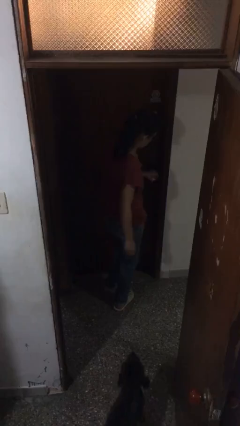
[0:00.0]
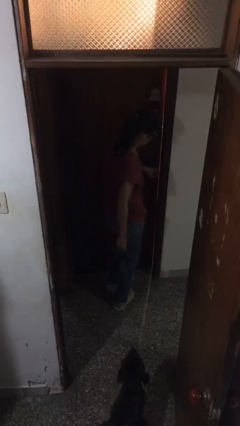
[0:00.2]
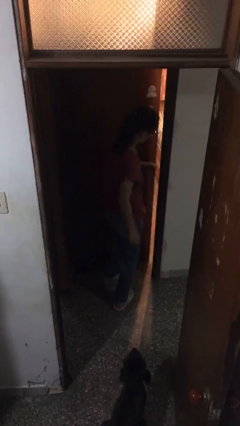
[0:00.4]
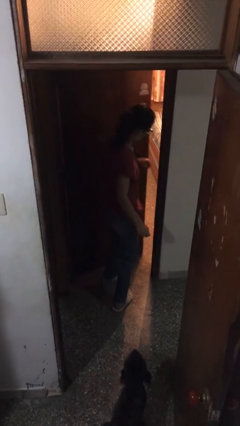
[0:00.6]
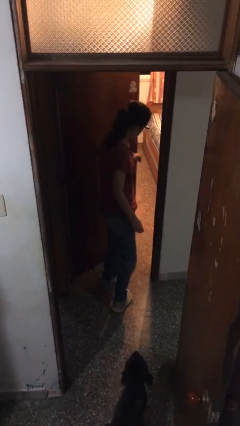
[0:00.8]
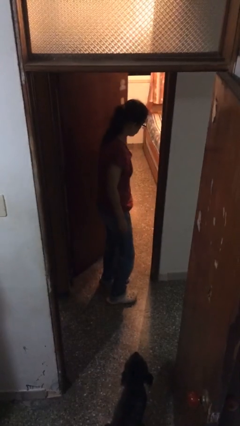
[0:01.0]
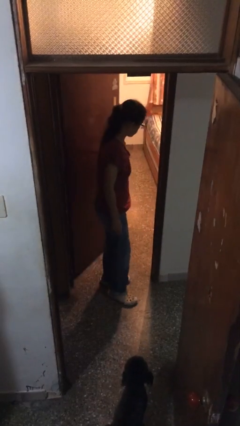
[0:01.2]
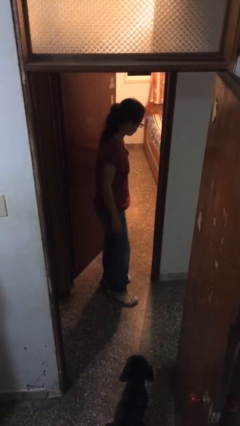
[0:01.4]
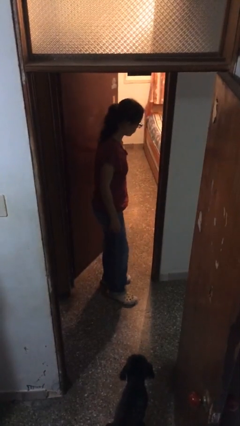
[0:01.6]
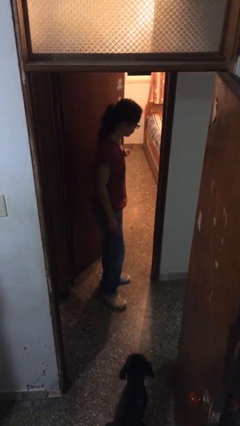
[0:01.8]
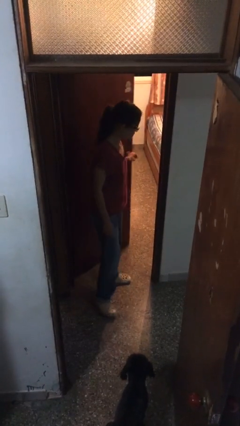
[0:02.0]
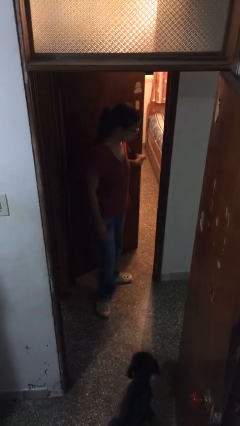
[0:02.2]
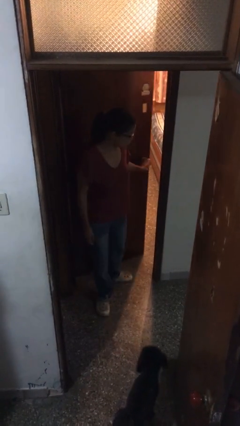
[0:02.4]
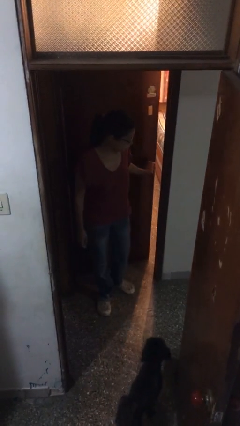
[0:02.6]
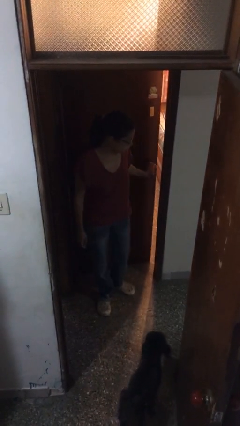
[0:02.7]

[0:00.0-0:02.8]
person opens facility door

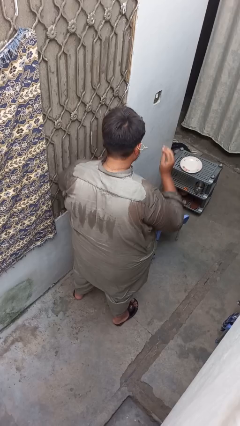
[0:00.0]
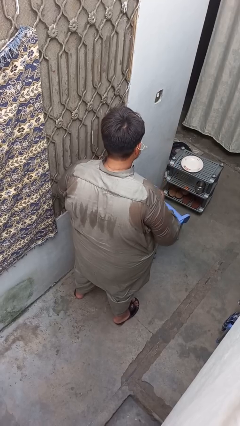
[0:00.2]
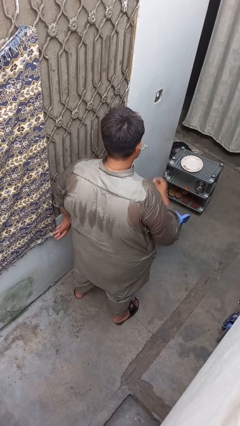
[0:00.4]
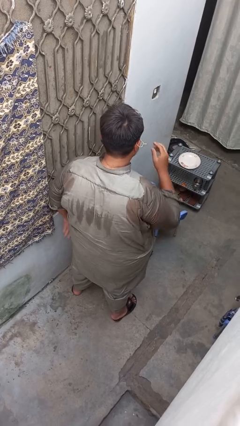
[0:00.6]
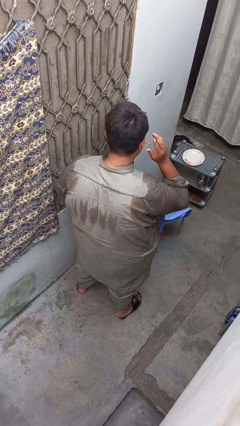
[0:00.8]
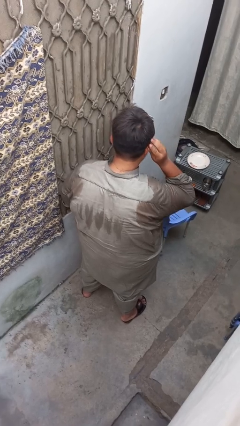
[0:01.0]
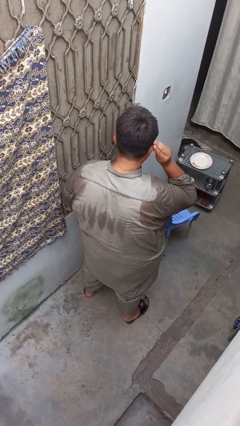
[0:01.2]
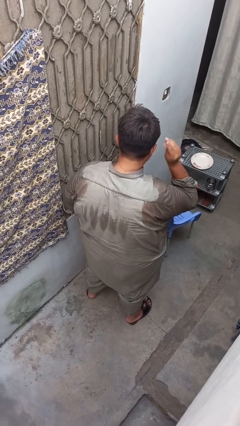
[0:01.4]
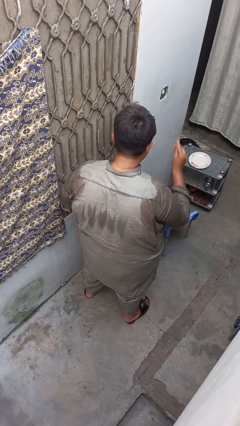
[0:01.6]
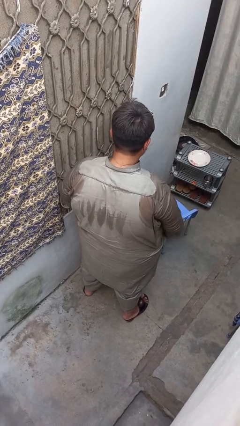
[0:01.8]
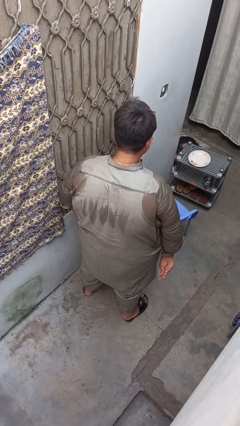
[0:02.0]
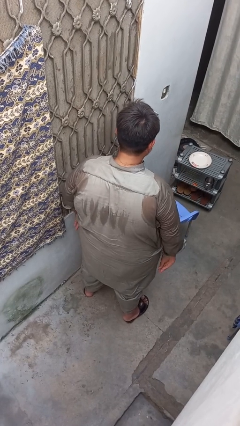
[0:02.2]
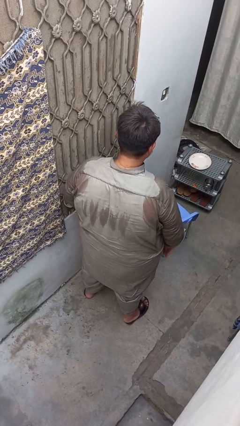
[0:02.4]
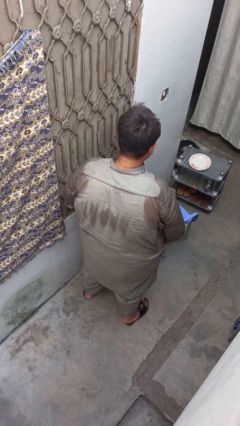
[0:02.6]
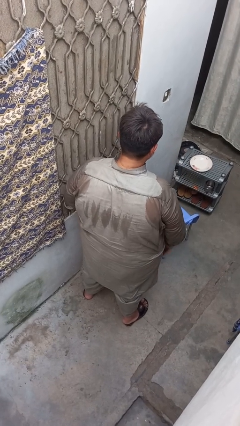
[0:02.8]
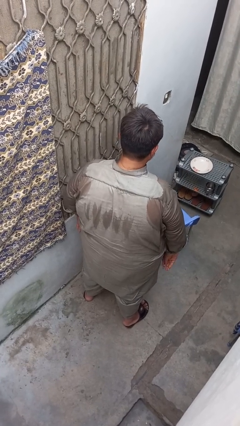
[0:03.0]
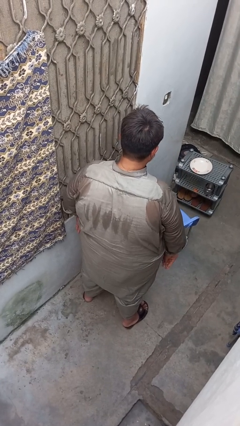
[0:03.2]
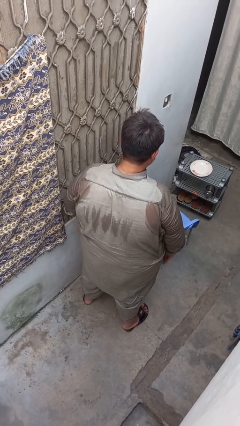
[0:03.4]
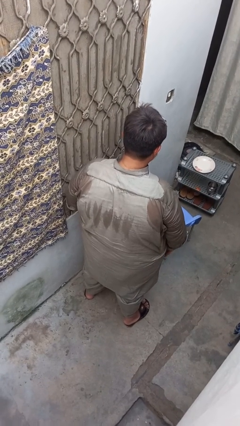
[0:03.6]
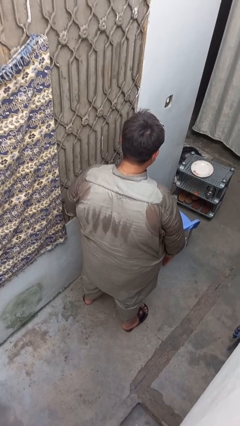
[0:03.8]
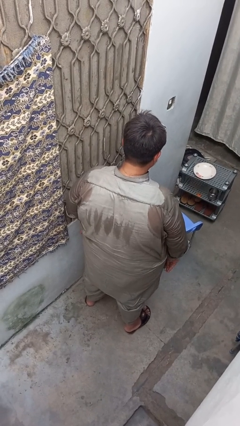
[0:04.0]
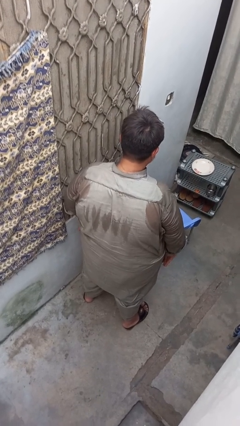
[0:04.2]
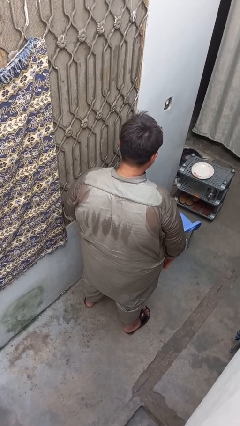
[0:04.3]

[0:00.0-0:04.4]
person takes off earrings

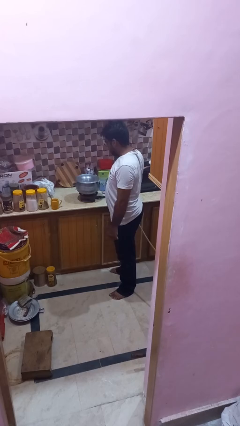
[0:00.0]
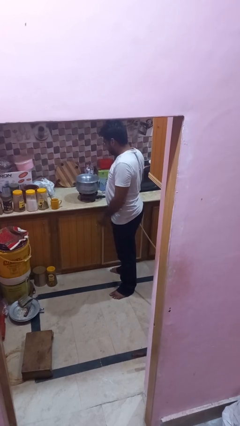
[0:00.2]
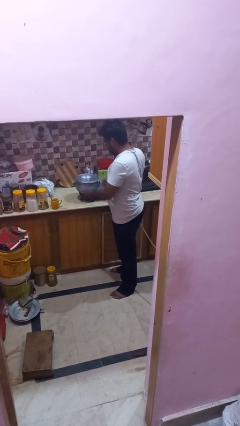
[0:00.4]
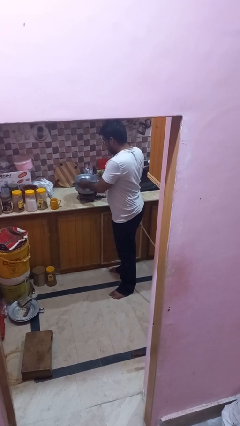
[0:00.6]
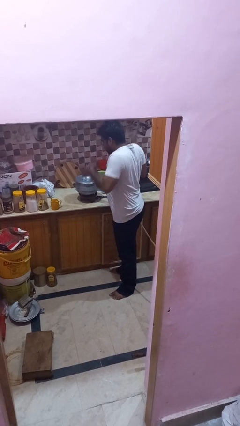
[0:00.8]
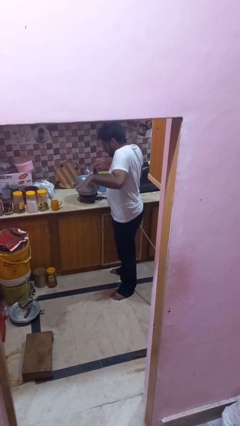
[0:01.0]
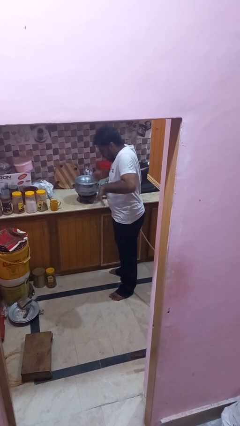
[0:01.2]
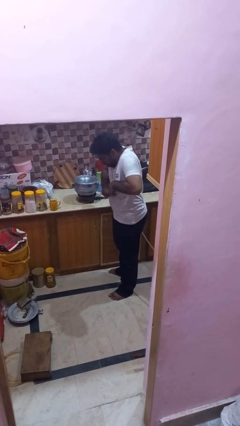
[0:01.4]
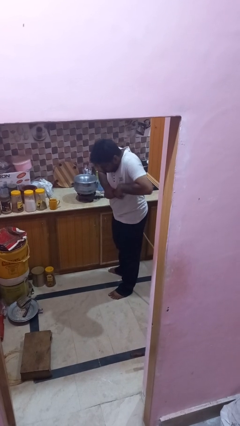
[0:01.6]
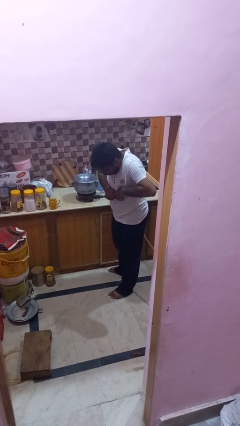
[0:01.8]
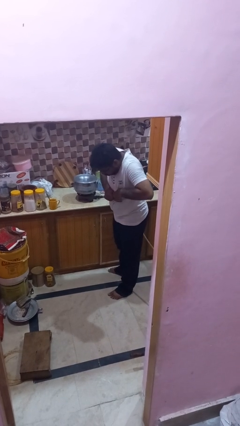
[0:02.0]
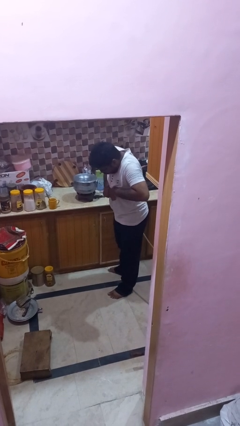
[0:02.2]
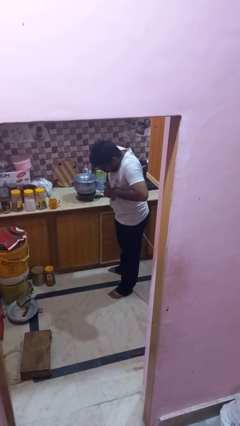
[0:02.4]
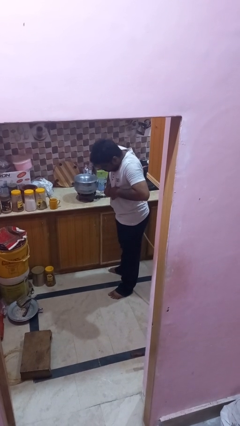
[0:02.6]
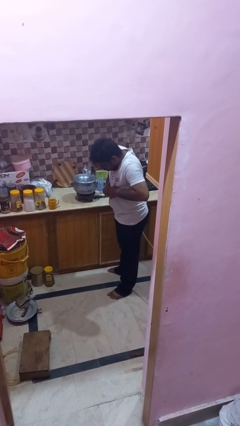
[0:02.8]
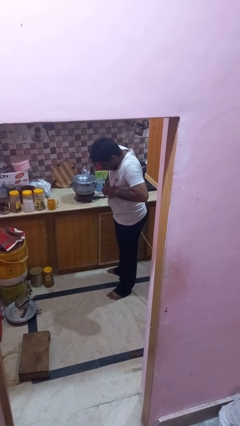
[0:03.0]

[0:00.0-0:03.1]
person burns hand

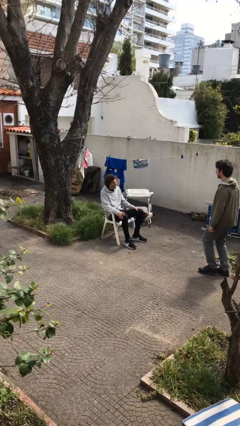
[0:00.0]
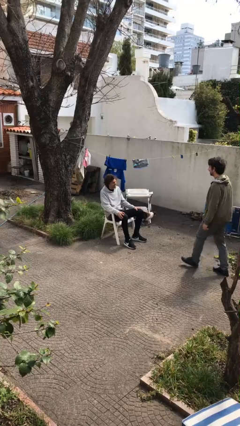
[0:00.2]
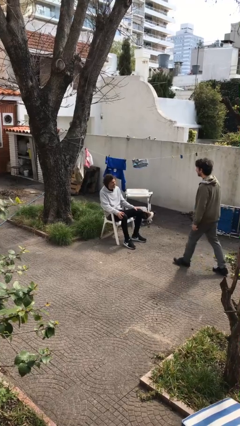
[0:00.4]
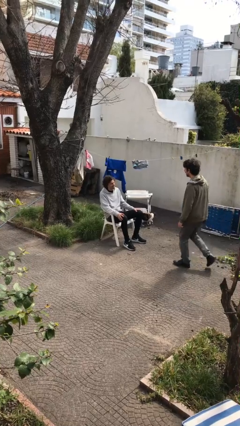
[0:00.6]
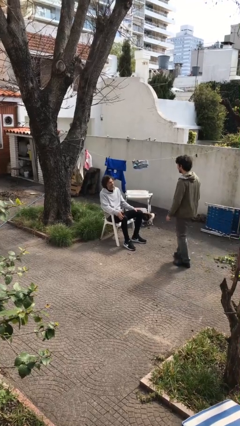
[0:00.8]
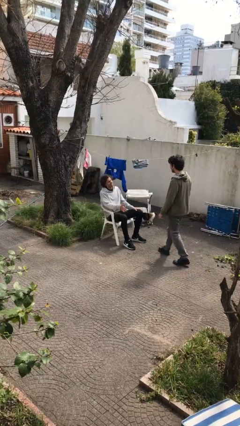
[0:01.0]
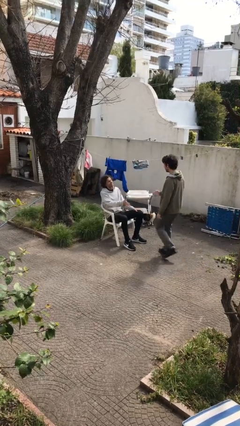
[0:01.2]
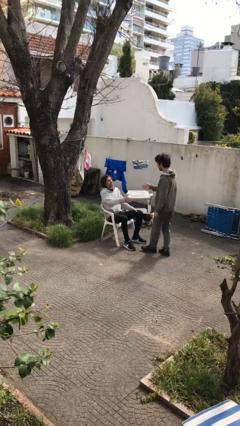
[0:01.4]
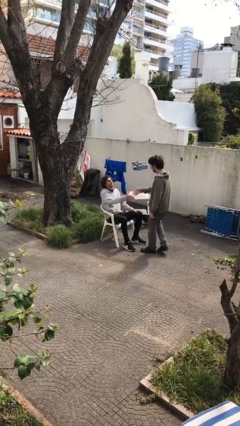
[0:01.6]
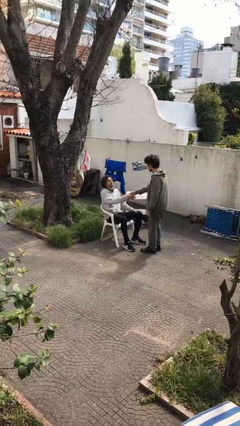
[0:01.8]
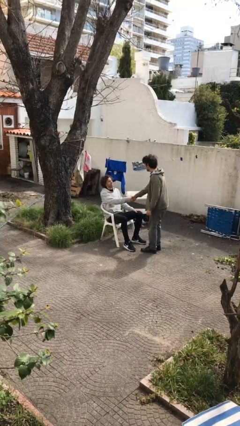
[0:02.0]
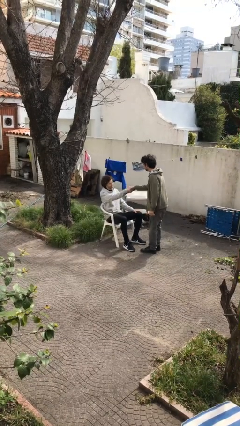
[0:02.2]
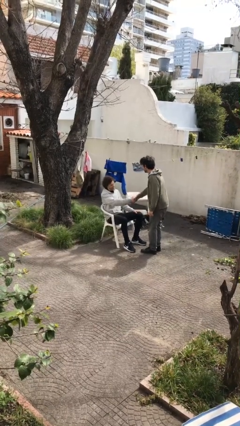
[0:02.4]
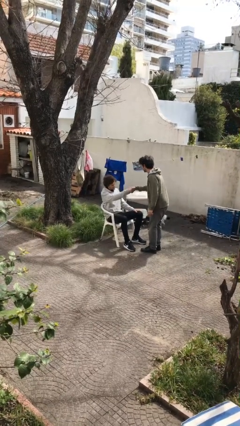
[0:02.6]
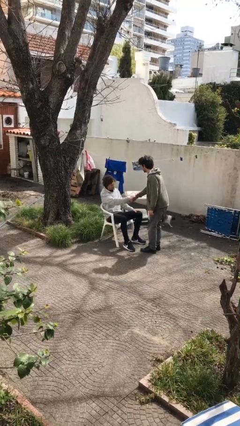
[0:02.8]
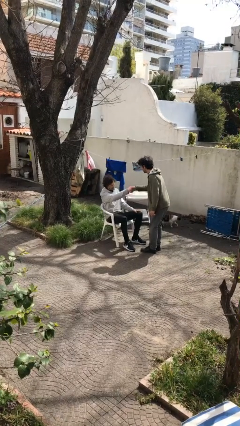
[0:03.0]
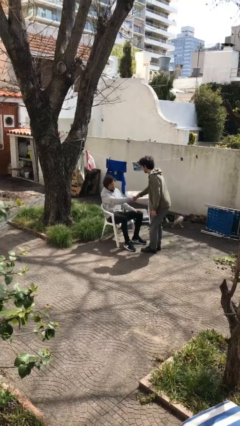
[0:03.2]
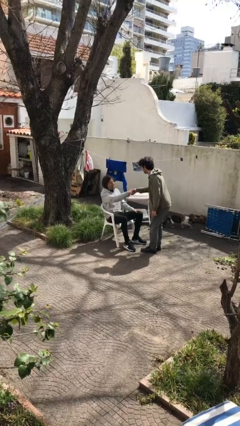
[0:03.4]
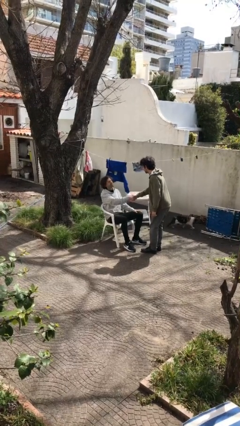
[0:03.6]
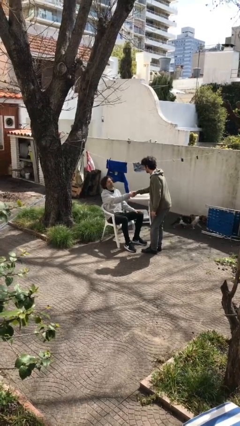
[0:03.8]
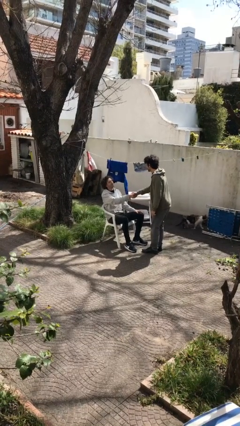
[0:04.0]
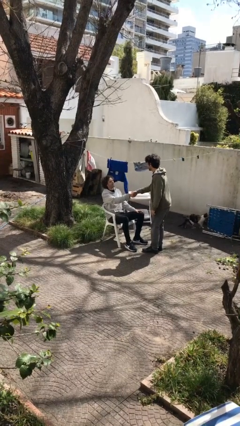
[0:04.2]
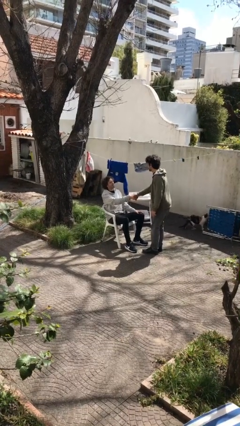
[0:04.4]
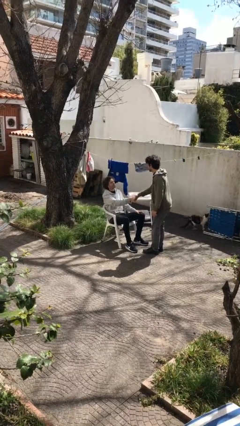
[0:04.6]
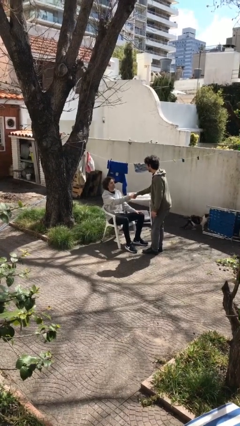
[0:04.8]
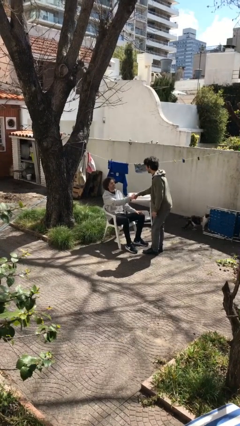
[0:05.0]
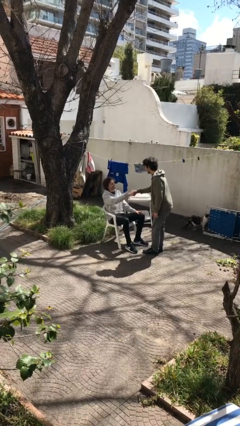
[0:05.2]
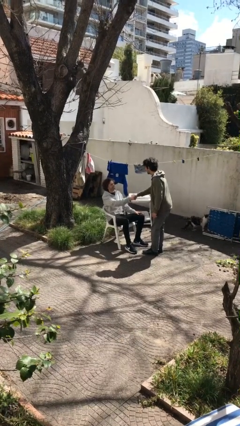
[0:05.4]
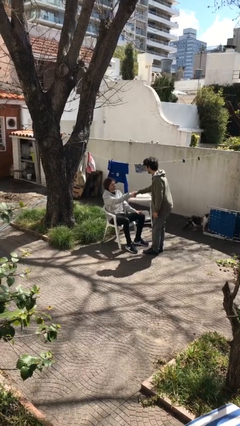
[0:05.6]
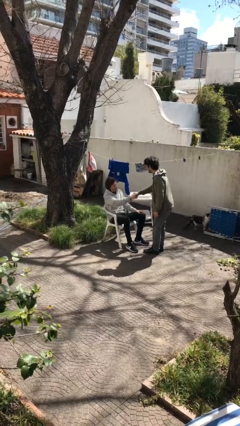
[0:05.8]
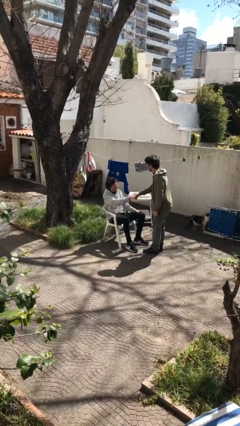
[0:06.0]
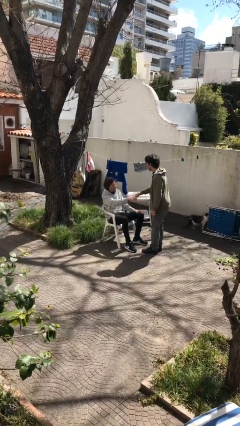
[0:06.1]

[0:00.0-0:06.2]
person shakes hand

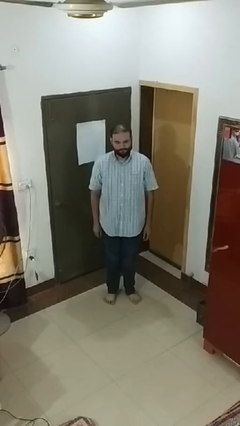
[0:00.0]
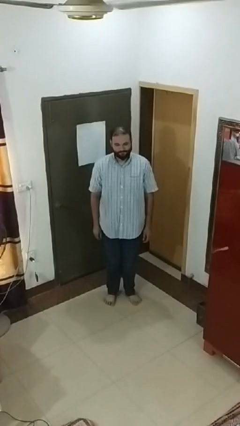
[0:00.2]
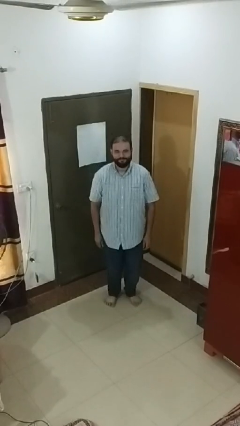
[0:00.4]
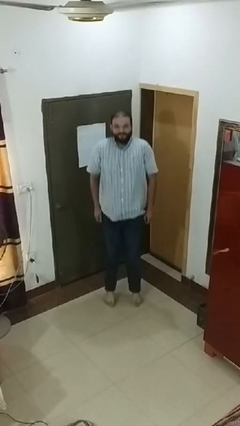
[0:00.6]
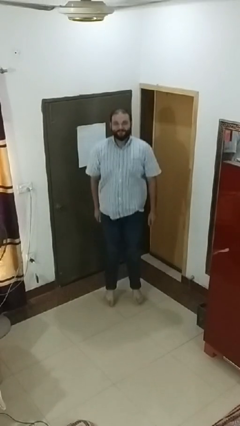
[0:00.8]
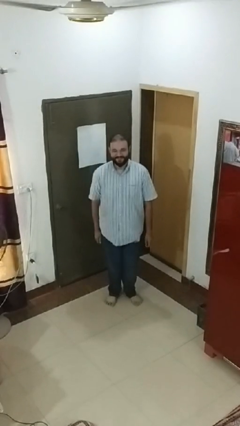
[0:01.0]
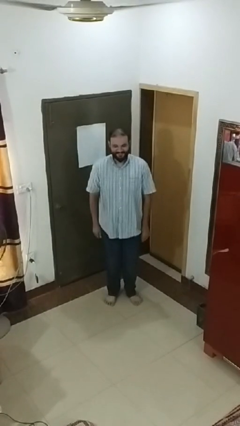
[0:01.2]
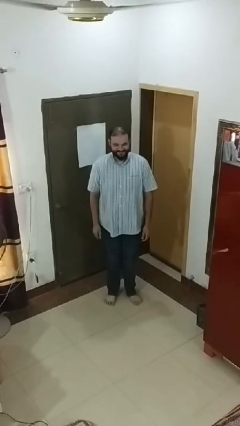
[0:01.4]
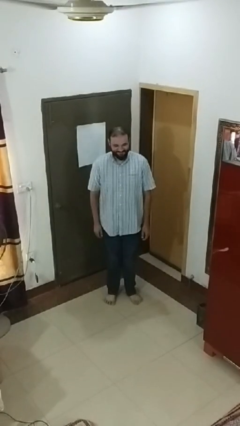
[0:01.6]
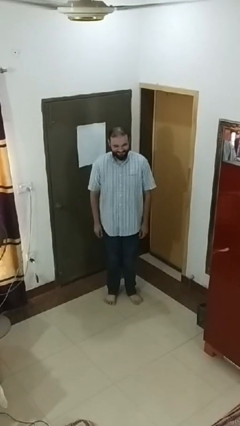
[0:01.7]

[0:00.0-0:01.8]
person jumps
